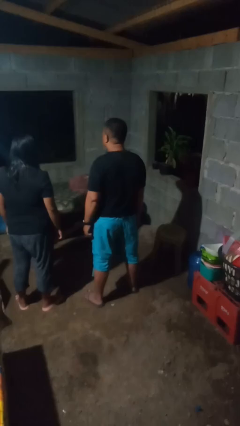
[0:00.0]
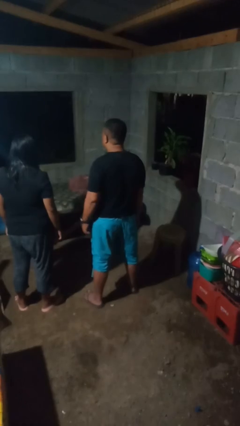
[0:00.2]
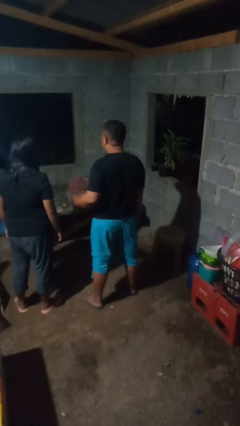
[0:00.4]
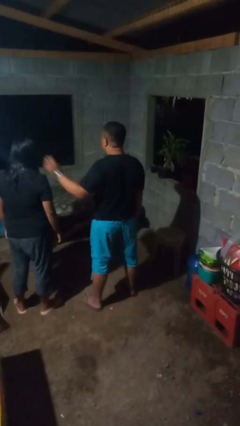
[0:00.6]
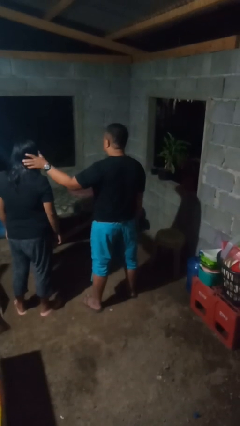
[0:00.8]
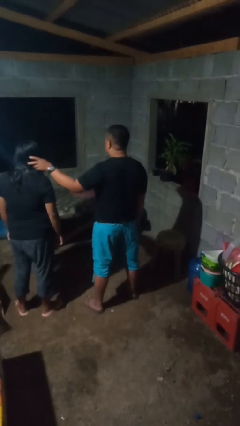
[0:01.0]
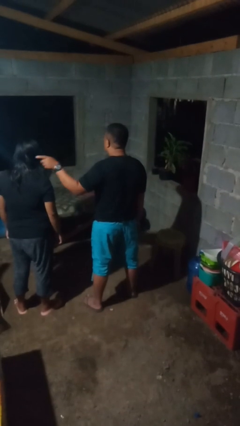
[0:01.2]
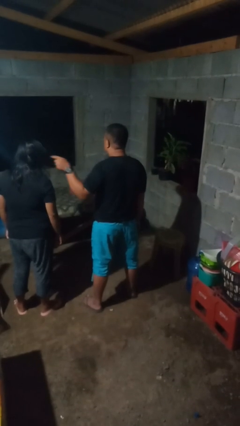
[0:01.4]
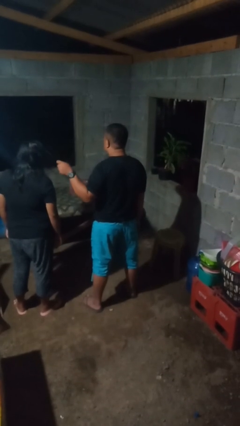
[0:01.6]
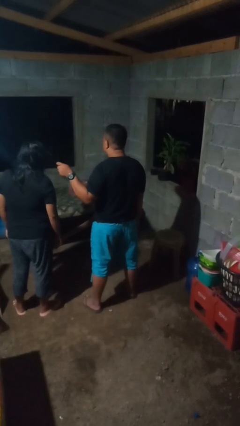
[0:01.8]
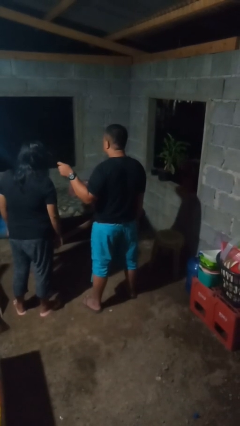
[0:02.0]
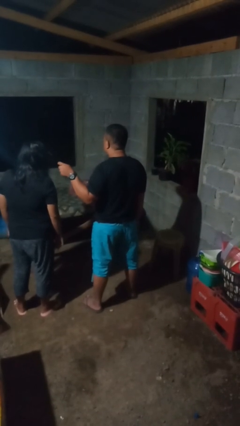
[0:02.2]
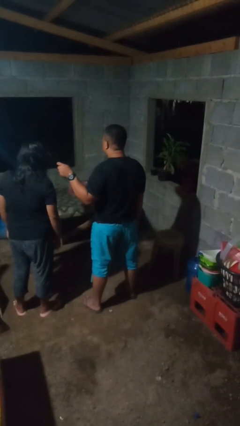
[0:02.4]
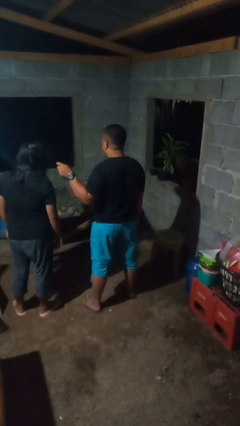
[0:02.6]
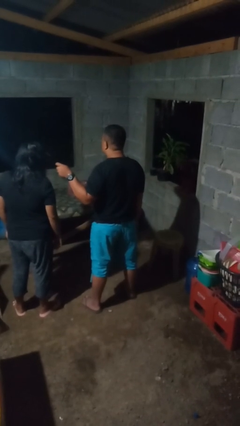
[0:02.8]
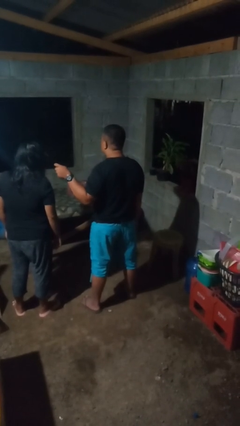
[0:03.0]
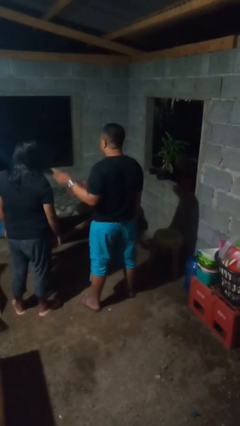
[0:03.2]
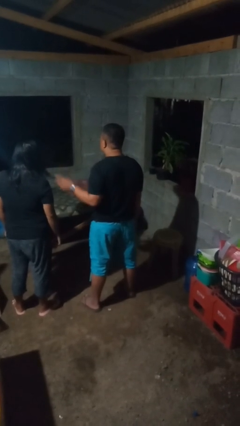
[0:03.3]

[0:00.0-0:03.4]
person grabs person by hair

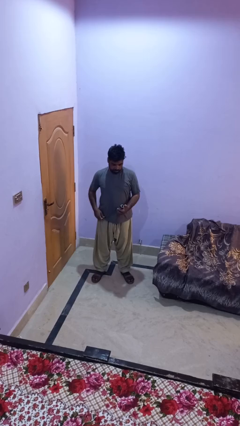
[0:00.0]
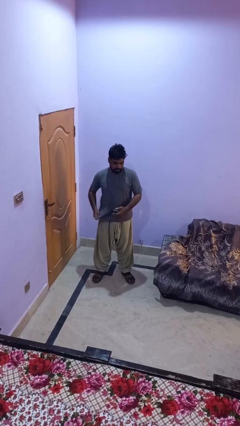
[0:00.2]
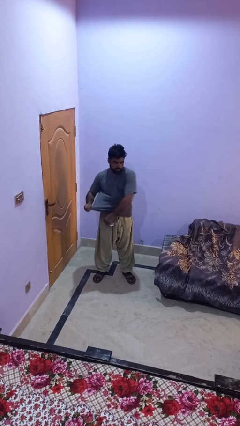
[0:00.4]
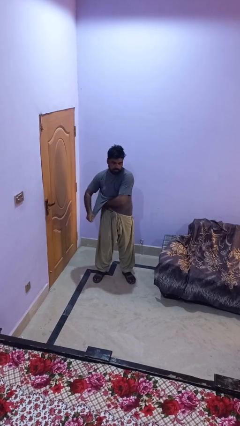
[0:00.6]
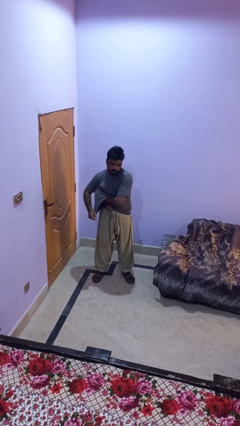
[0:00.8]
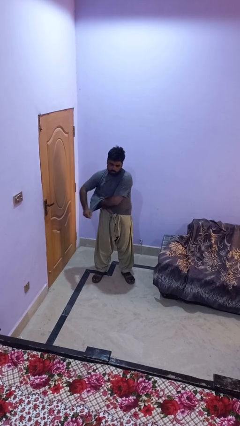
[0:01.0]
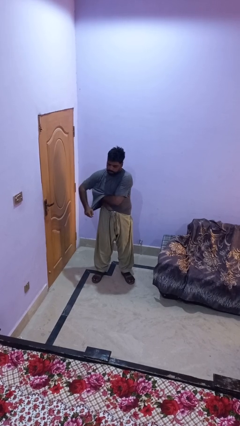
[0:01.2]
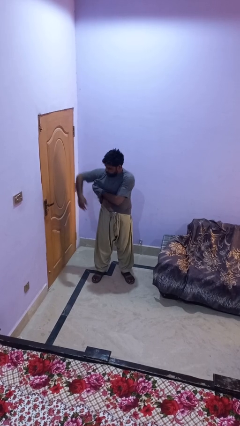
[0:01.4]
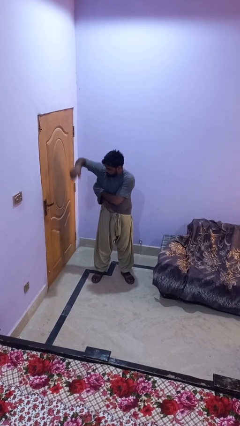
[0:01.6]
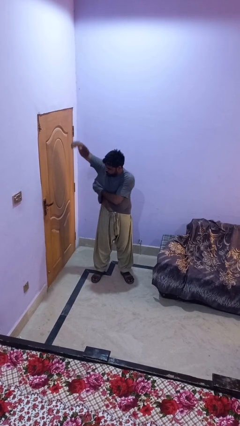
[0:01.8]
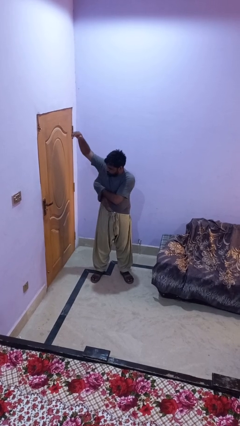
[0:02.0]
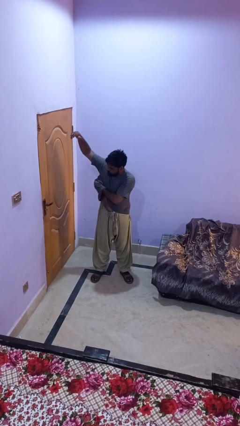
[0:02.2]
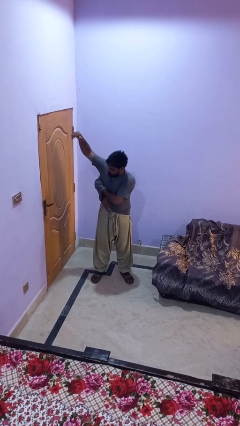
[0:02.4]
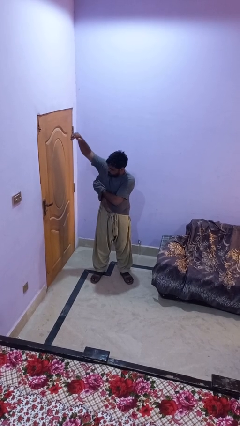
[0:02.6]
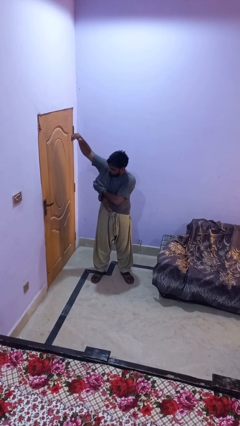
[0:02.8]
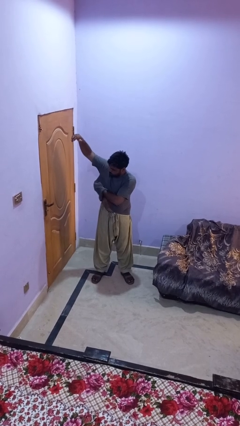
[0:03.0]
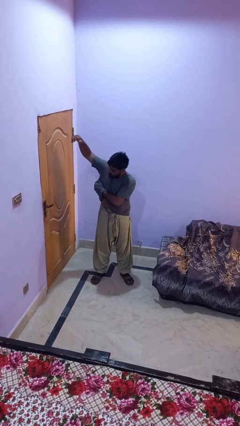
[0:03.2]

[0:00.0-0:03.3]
person applies deodorant

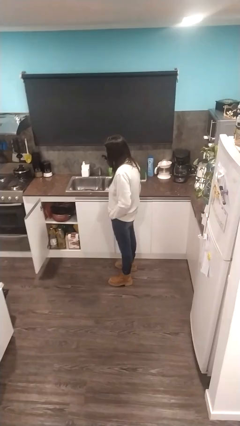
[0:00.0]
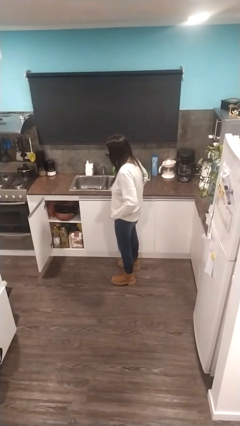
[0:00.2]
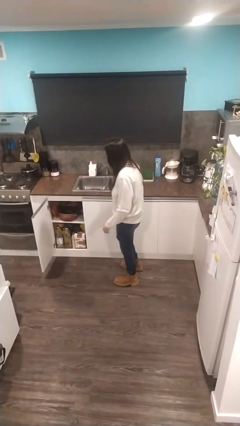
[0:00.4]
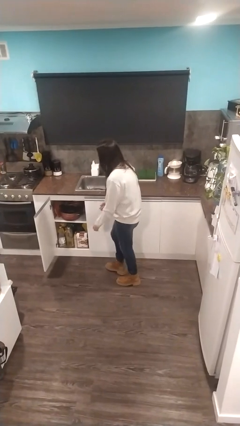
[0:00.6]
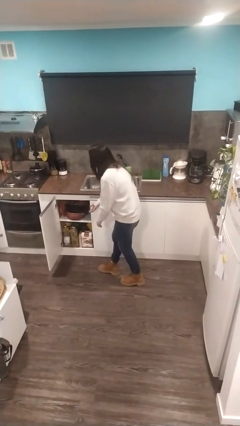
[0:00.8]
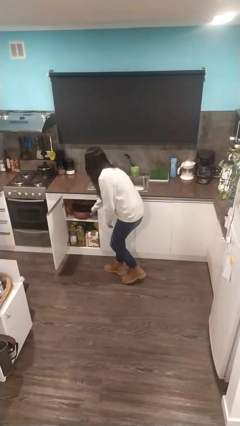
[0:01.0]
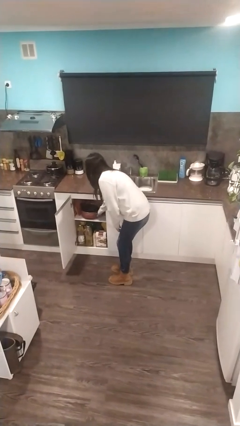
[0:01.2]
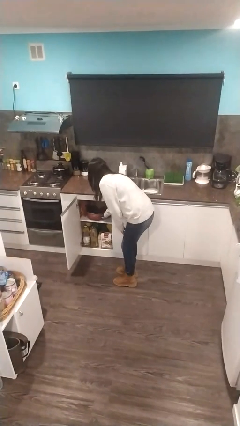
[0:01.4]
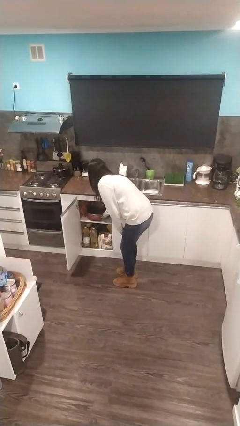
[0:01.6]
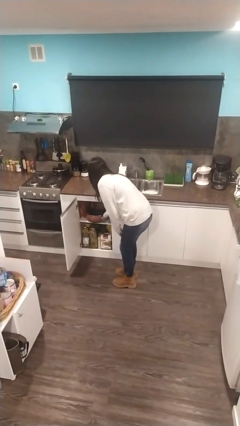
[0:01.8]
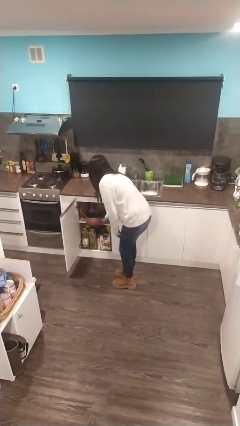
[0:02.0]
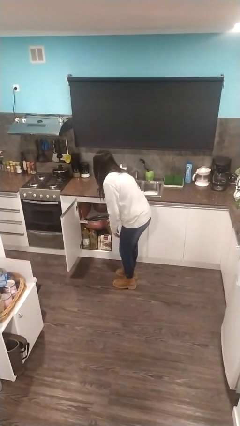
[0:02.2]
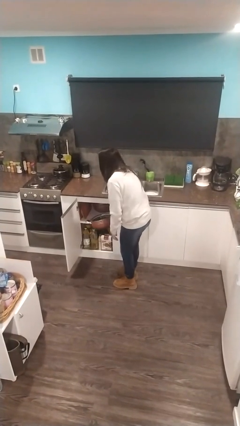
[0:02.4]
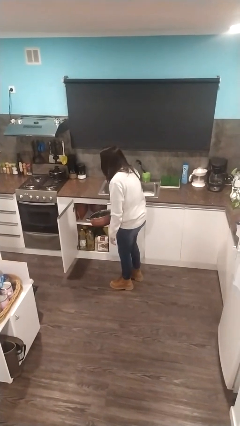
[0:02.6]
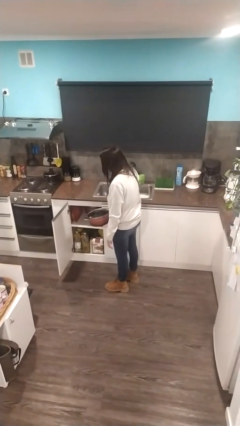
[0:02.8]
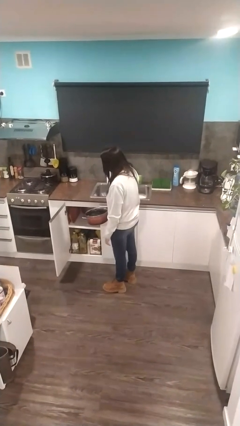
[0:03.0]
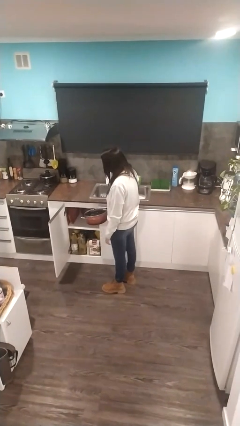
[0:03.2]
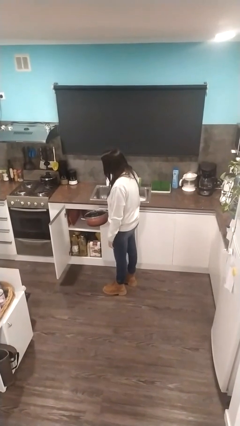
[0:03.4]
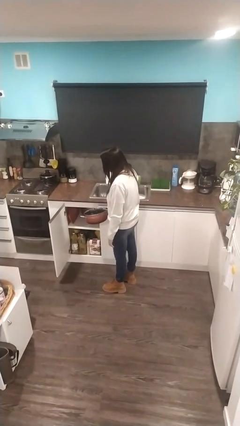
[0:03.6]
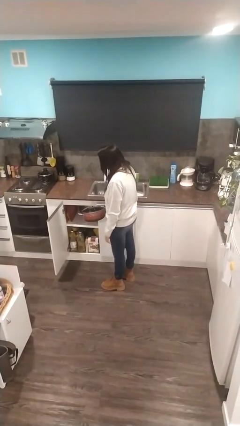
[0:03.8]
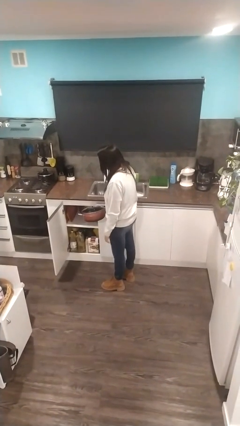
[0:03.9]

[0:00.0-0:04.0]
person picks up object from cabinet

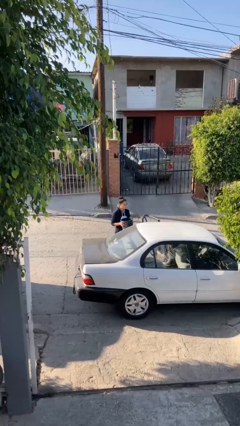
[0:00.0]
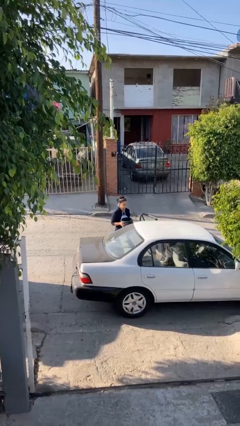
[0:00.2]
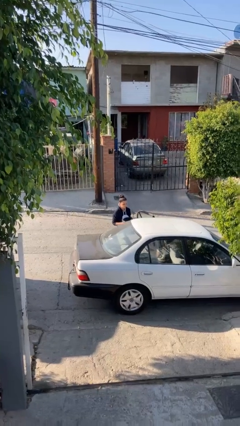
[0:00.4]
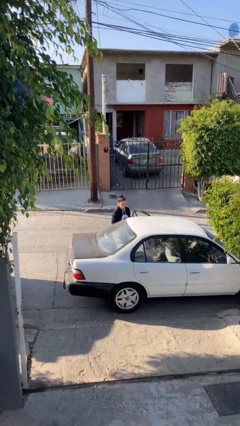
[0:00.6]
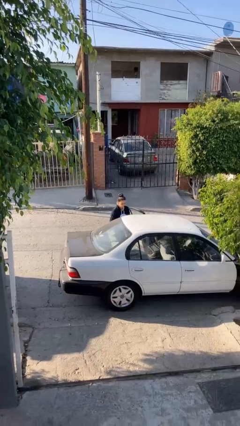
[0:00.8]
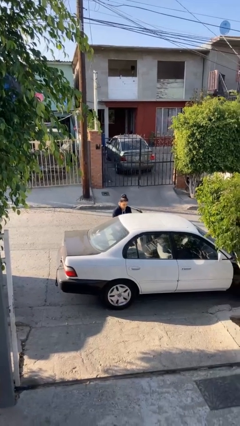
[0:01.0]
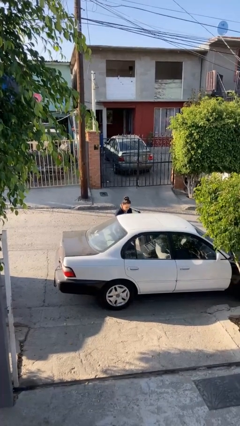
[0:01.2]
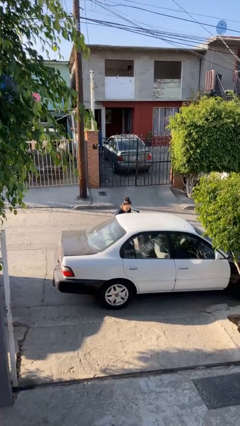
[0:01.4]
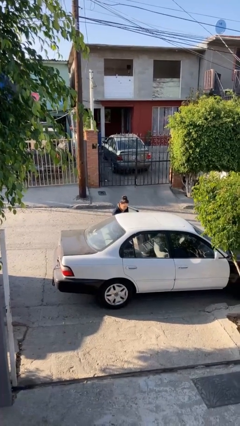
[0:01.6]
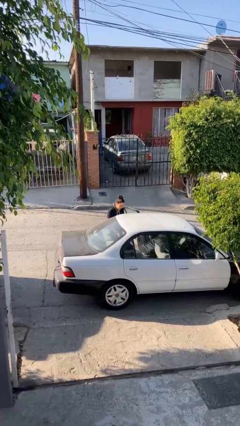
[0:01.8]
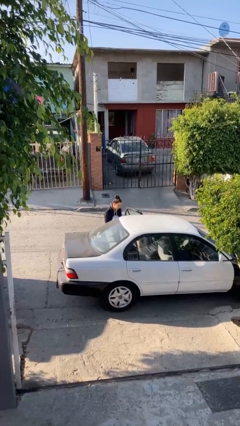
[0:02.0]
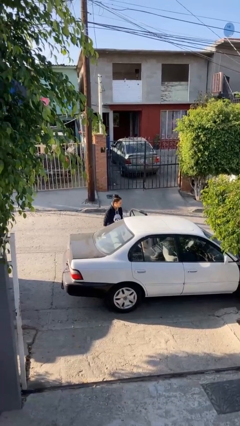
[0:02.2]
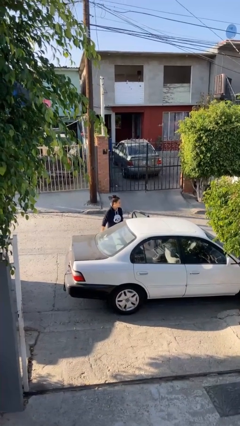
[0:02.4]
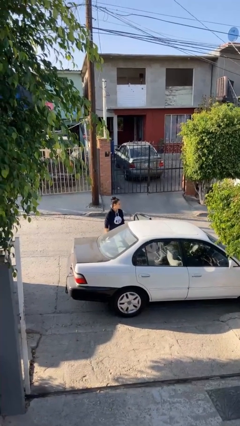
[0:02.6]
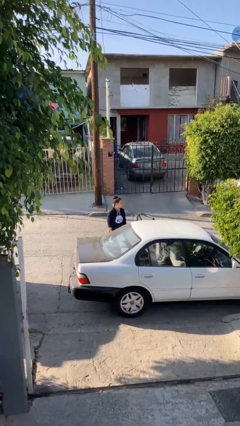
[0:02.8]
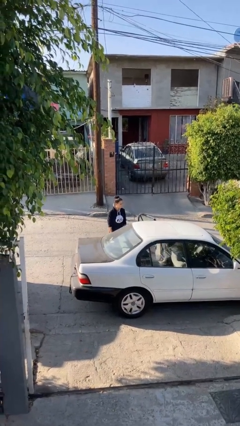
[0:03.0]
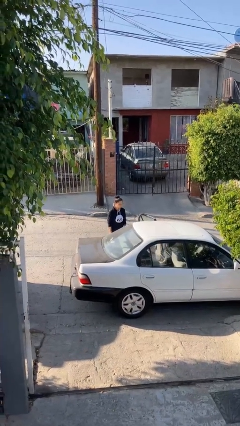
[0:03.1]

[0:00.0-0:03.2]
person loads car

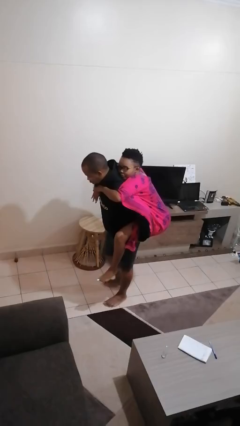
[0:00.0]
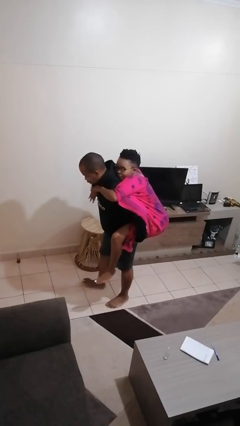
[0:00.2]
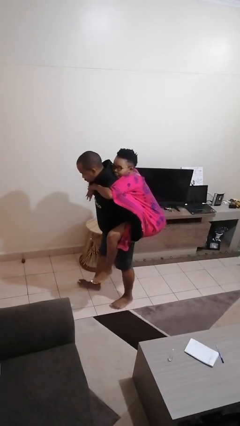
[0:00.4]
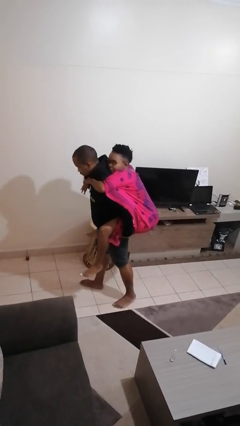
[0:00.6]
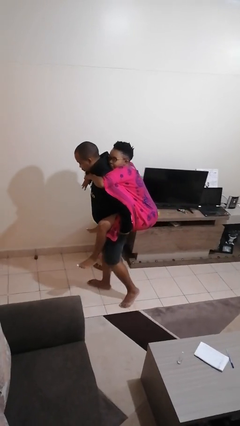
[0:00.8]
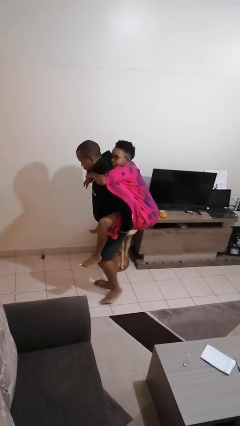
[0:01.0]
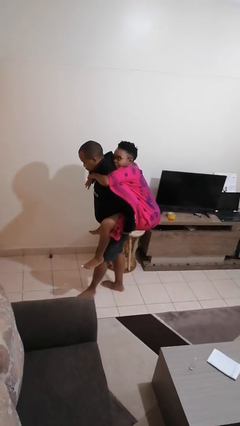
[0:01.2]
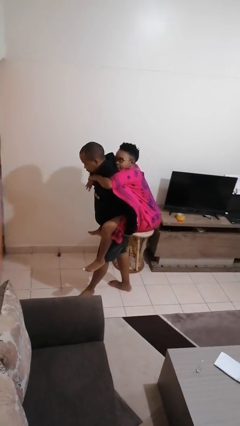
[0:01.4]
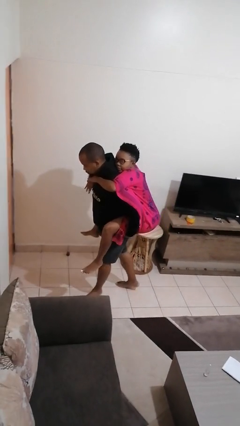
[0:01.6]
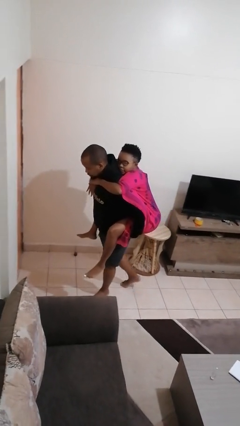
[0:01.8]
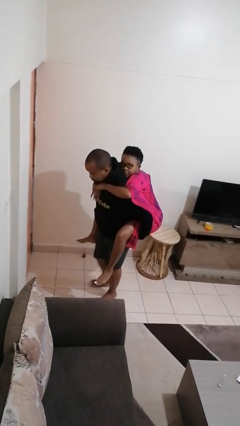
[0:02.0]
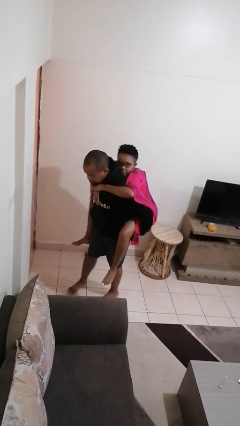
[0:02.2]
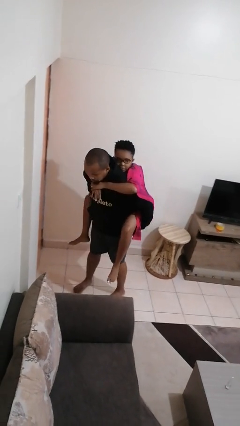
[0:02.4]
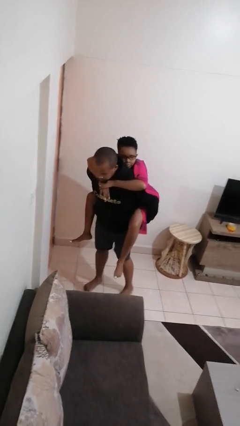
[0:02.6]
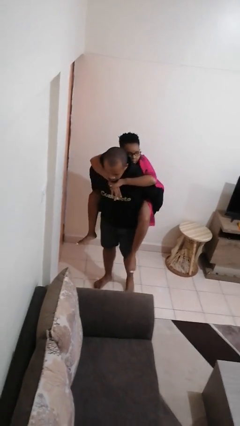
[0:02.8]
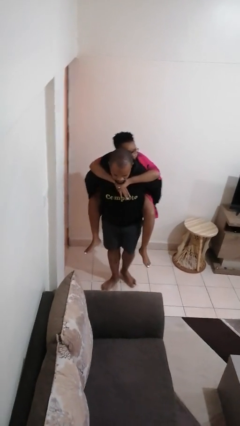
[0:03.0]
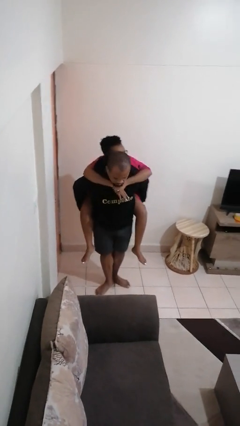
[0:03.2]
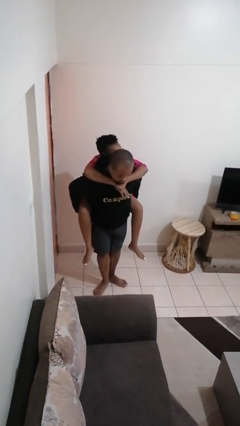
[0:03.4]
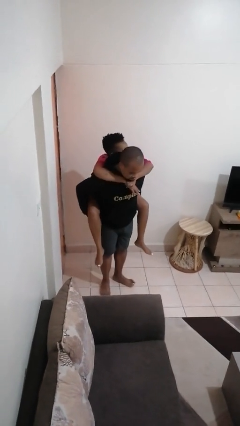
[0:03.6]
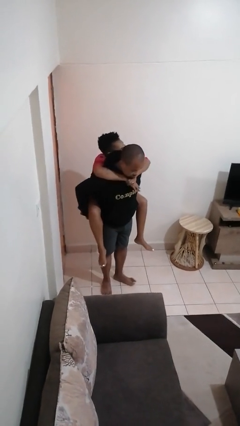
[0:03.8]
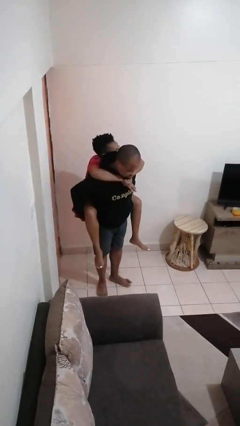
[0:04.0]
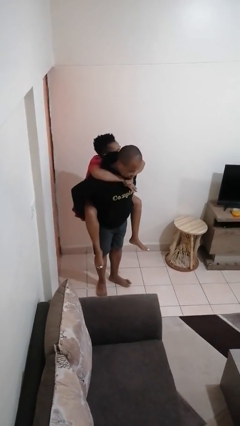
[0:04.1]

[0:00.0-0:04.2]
person carries person on back
